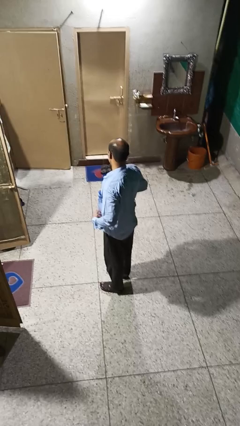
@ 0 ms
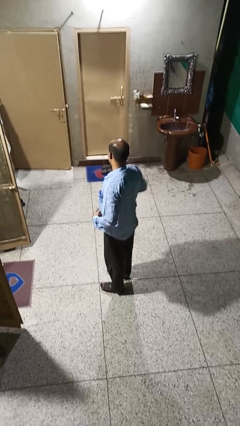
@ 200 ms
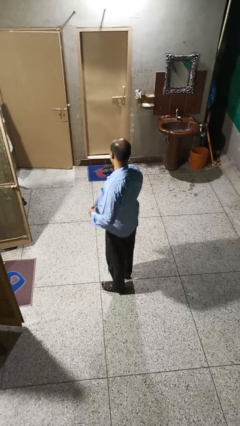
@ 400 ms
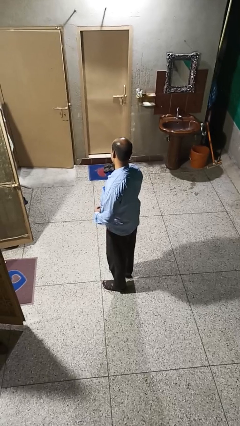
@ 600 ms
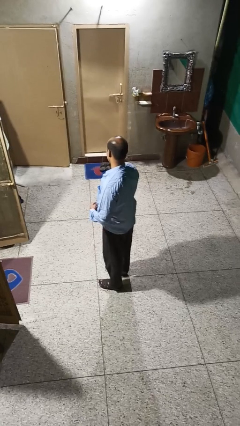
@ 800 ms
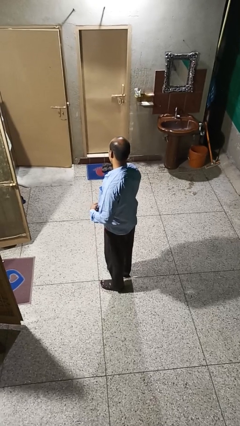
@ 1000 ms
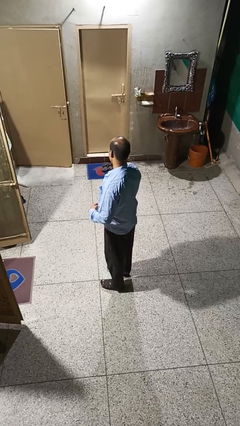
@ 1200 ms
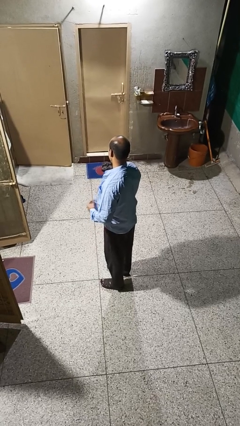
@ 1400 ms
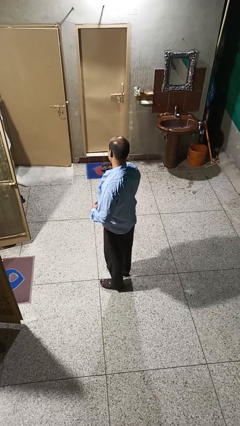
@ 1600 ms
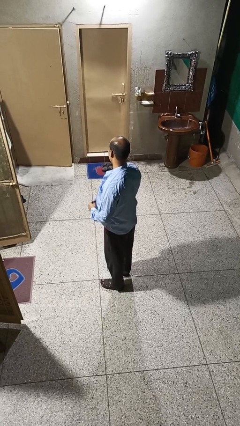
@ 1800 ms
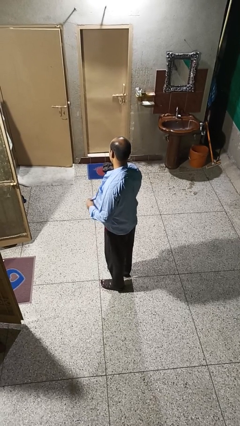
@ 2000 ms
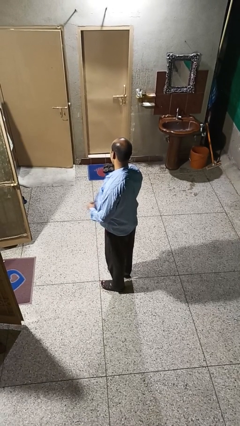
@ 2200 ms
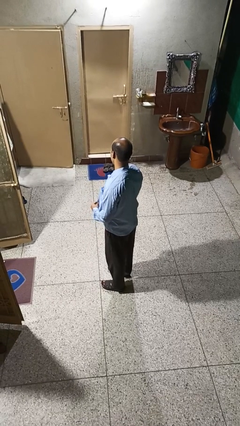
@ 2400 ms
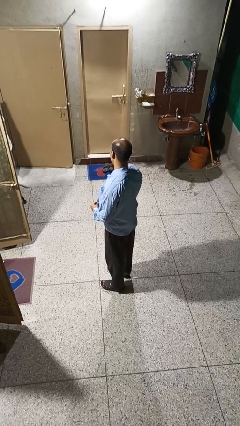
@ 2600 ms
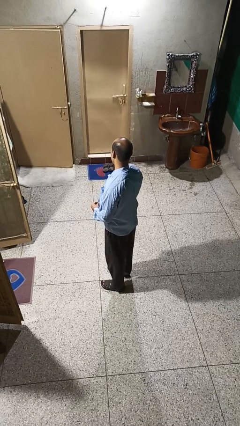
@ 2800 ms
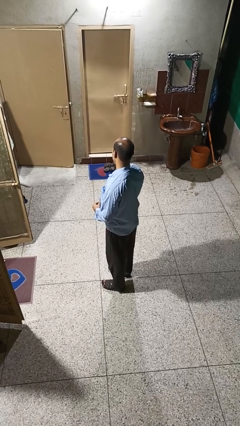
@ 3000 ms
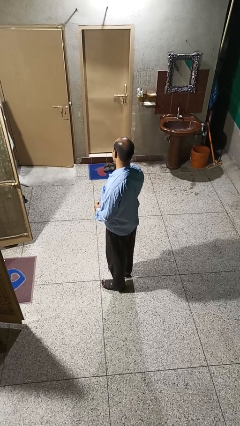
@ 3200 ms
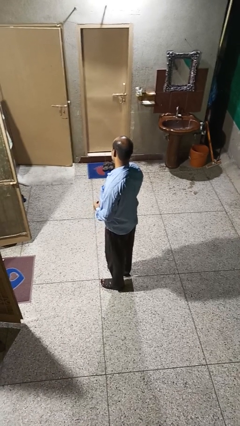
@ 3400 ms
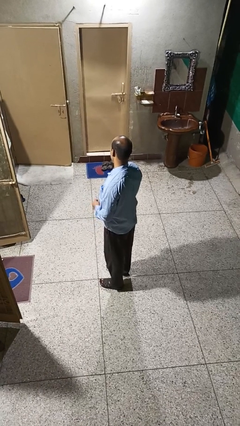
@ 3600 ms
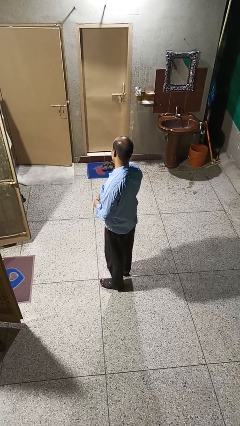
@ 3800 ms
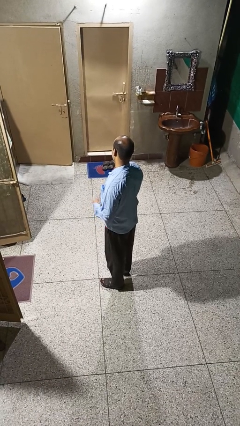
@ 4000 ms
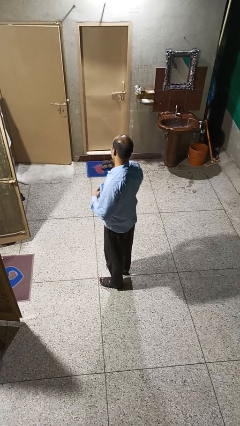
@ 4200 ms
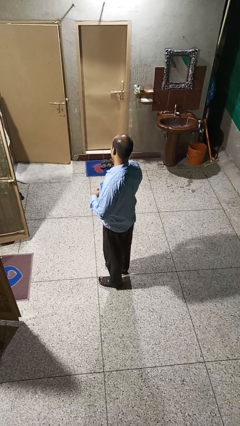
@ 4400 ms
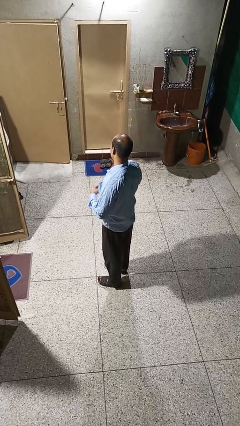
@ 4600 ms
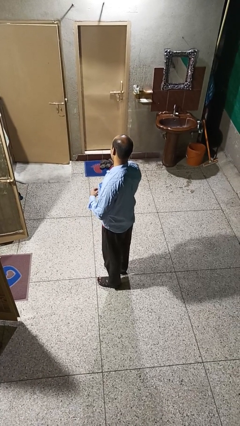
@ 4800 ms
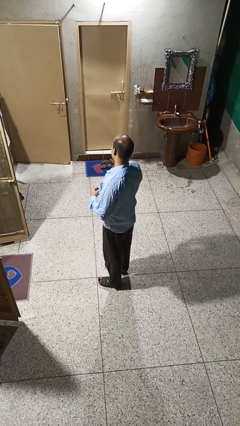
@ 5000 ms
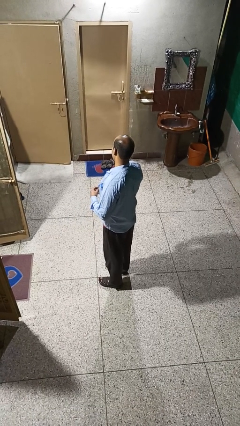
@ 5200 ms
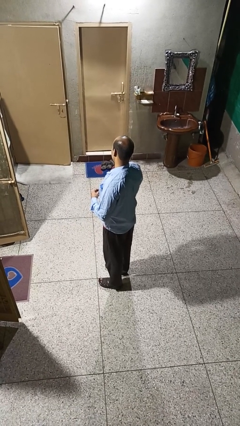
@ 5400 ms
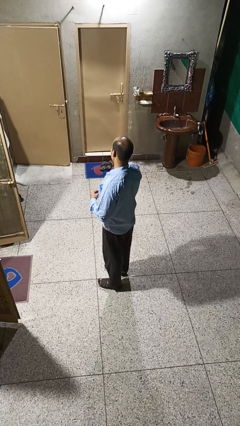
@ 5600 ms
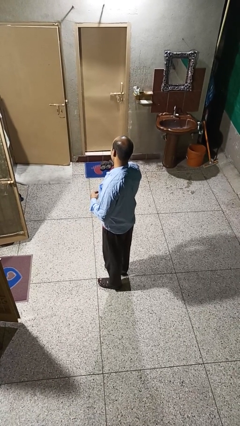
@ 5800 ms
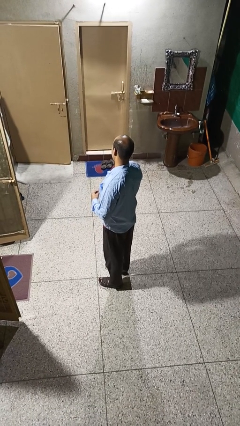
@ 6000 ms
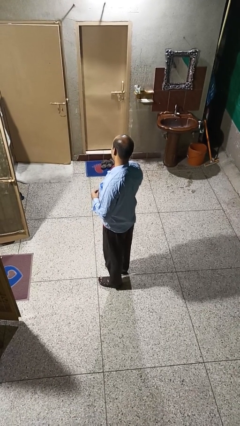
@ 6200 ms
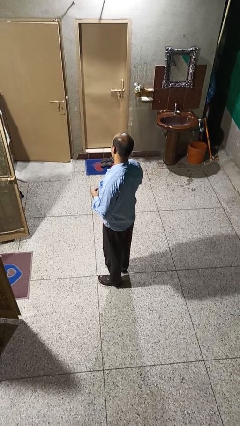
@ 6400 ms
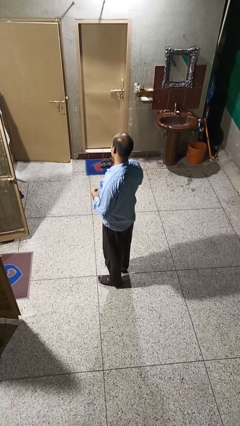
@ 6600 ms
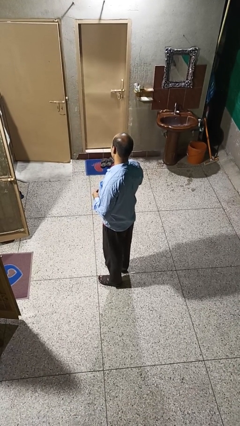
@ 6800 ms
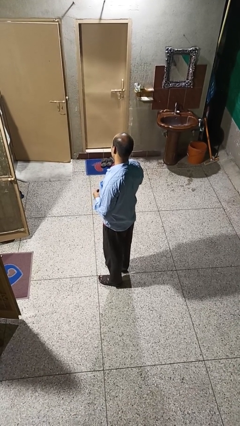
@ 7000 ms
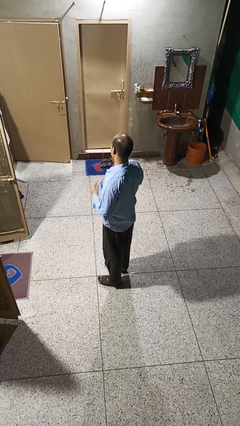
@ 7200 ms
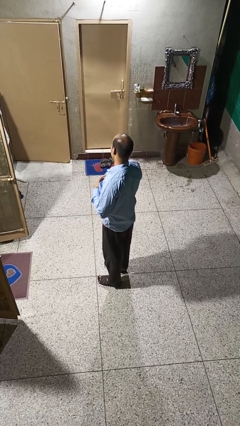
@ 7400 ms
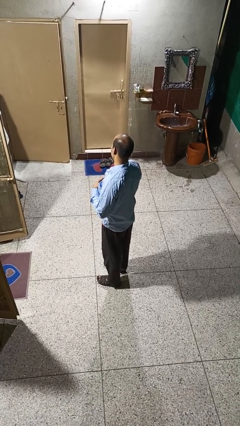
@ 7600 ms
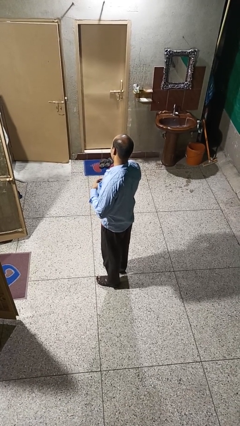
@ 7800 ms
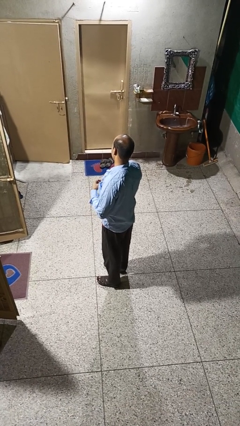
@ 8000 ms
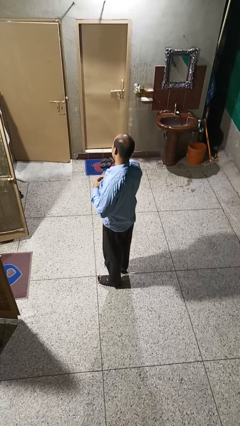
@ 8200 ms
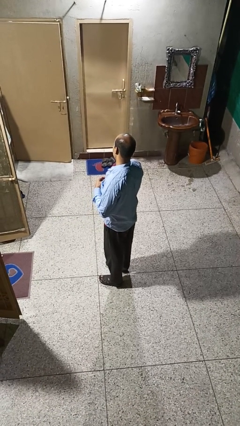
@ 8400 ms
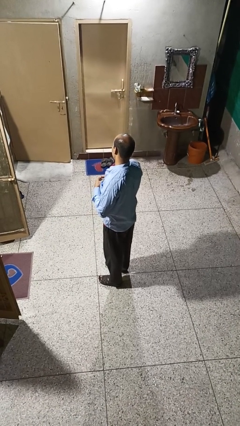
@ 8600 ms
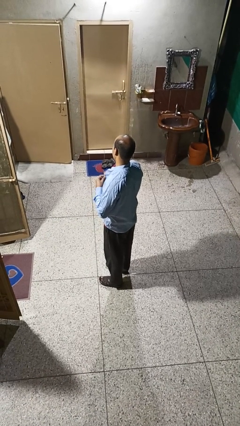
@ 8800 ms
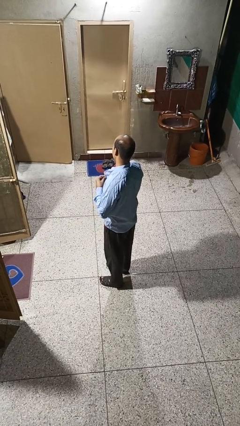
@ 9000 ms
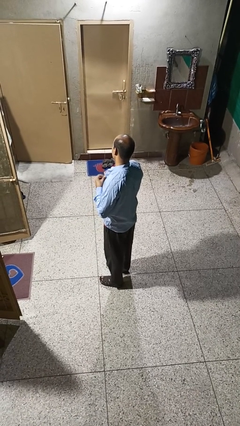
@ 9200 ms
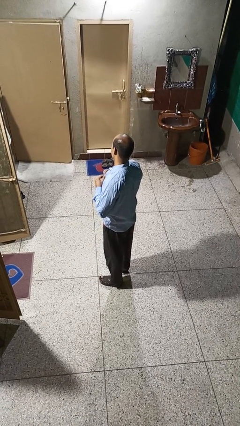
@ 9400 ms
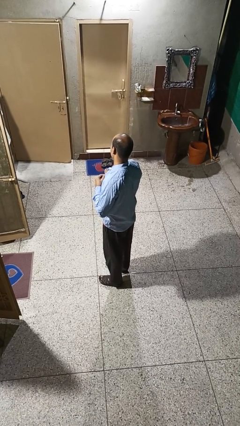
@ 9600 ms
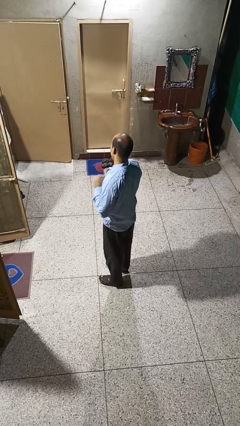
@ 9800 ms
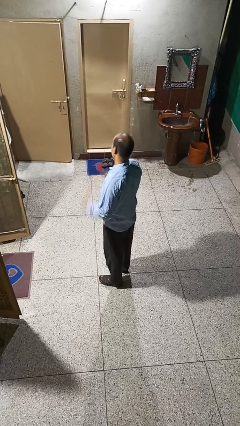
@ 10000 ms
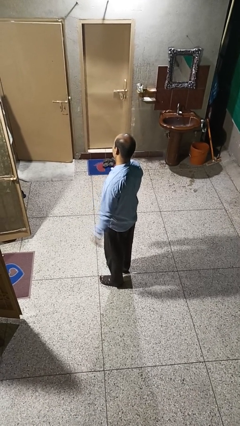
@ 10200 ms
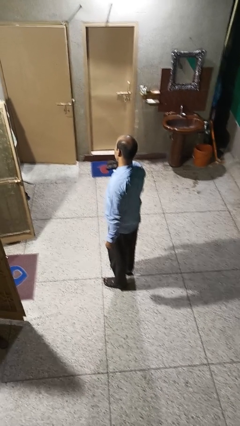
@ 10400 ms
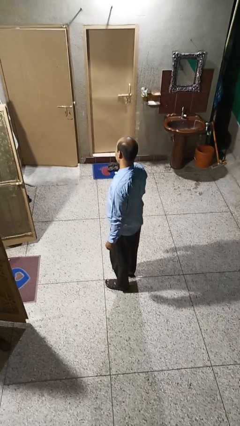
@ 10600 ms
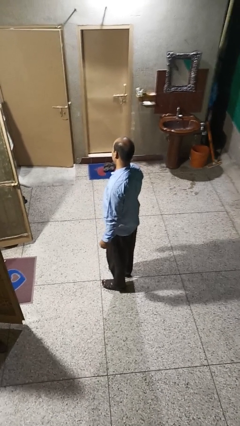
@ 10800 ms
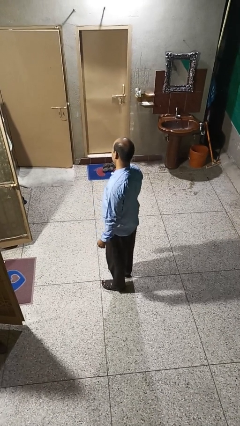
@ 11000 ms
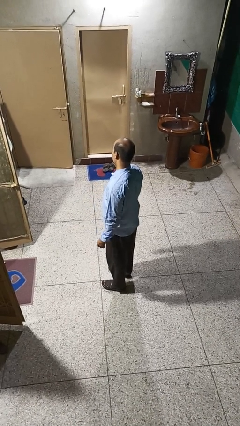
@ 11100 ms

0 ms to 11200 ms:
person buttons shirt

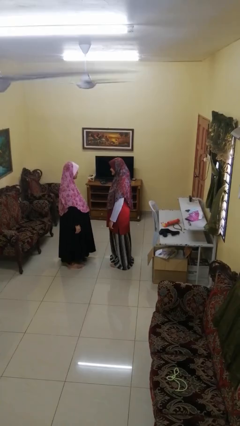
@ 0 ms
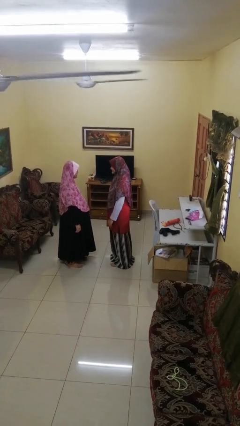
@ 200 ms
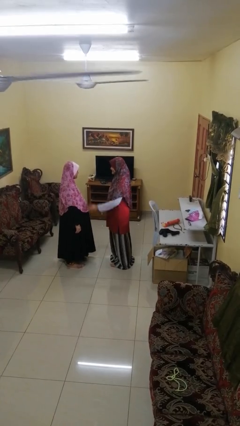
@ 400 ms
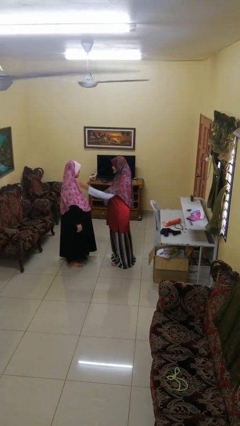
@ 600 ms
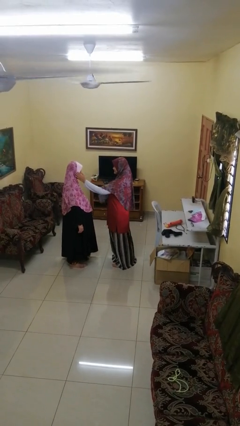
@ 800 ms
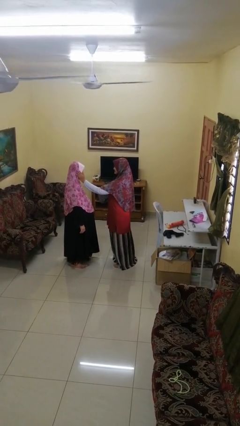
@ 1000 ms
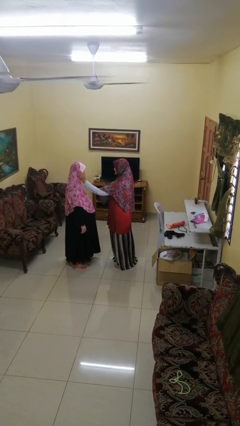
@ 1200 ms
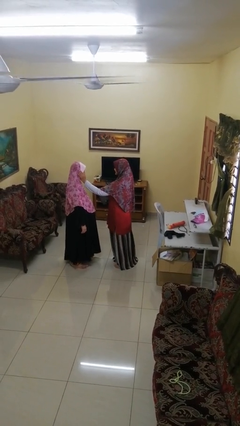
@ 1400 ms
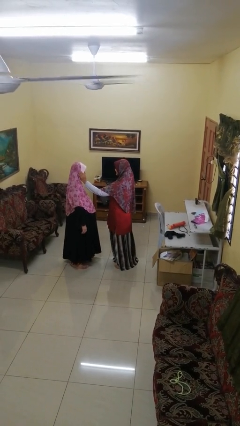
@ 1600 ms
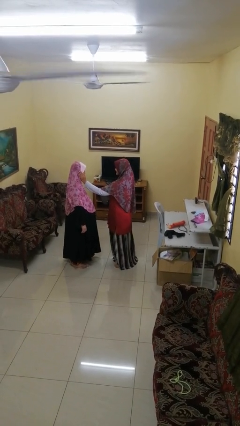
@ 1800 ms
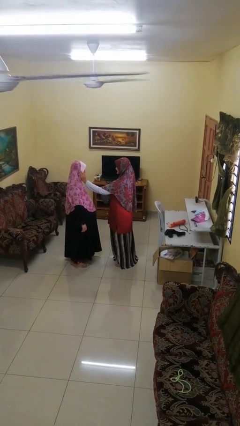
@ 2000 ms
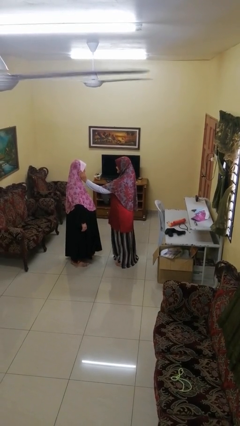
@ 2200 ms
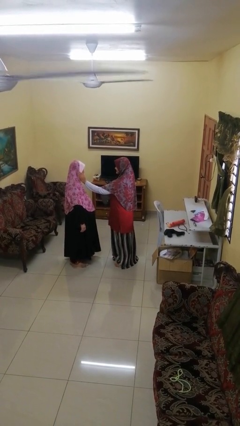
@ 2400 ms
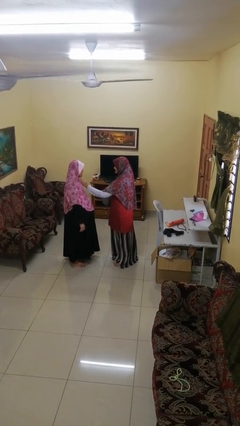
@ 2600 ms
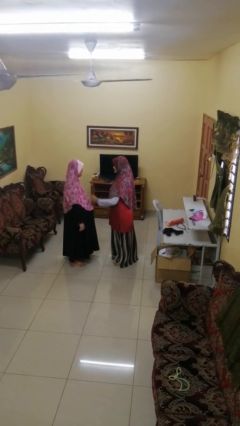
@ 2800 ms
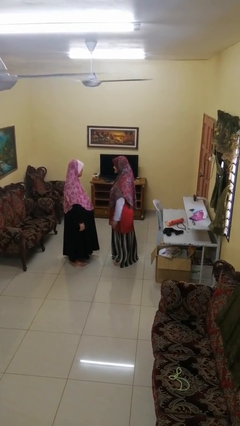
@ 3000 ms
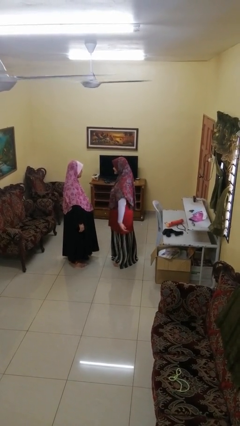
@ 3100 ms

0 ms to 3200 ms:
person touches face of person

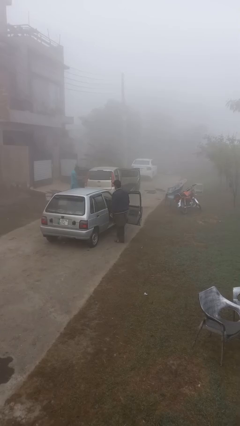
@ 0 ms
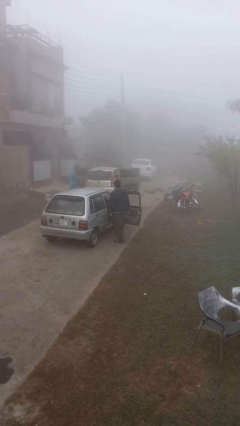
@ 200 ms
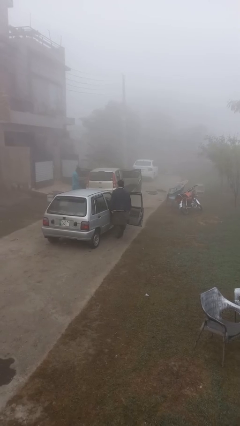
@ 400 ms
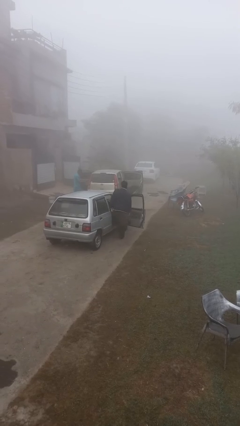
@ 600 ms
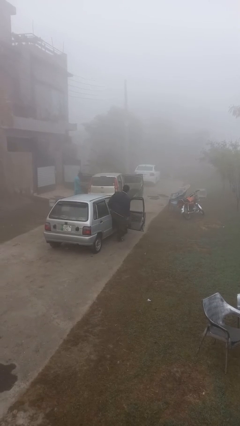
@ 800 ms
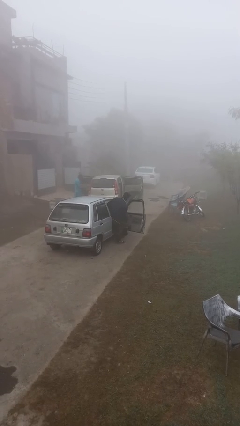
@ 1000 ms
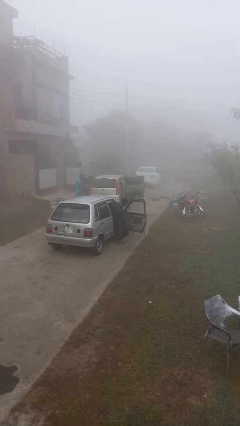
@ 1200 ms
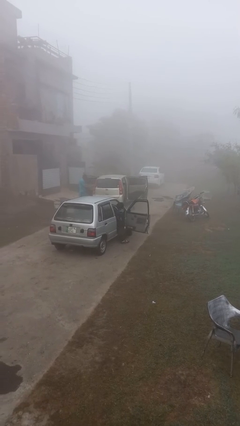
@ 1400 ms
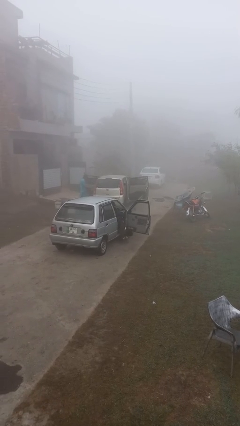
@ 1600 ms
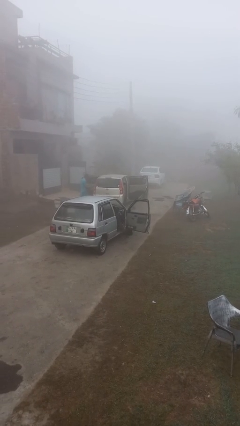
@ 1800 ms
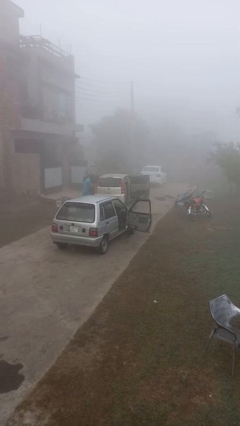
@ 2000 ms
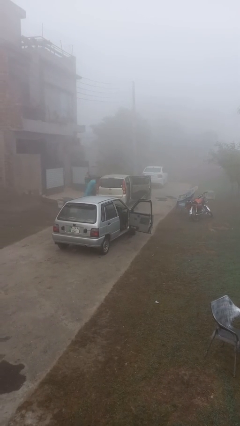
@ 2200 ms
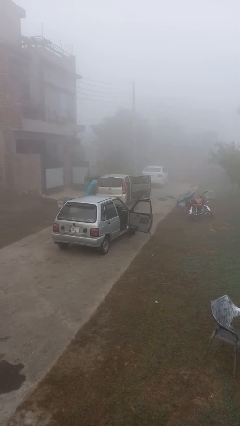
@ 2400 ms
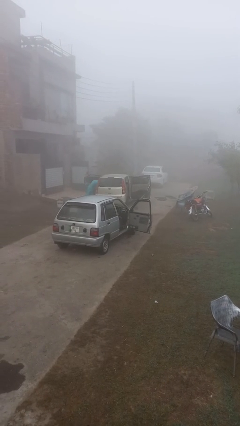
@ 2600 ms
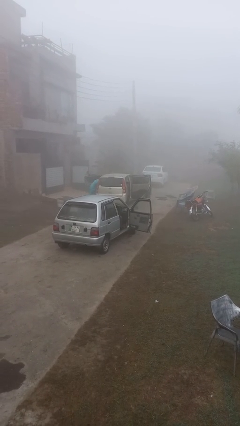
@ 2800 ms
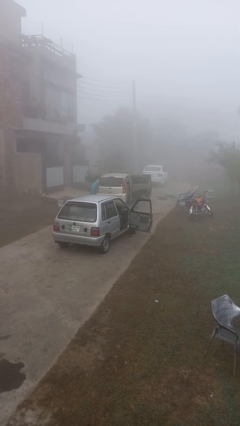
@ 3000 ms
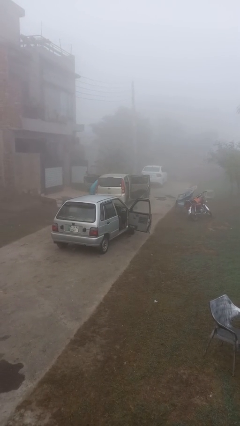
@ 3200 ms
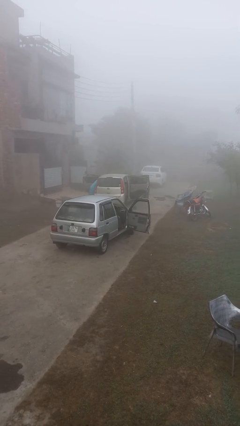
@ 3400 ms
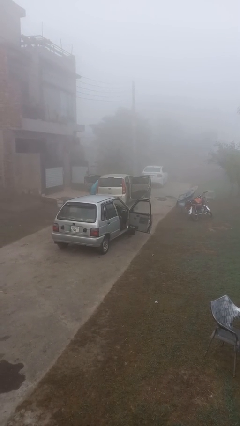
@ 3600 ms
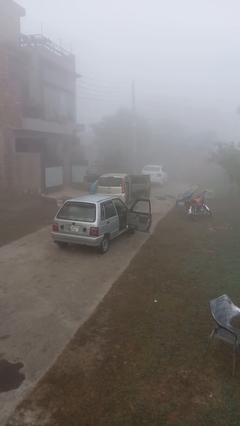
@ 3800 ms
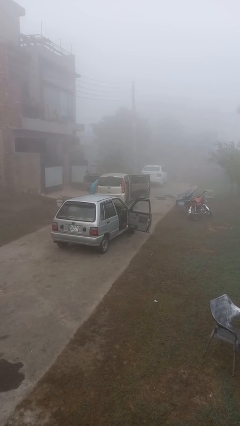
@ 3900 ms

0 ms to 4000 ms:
person enters car
